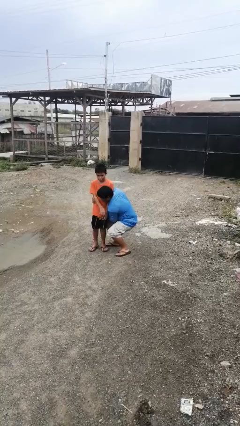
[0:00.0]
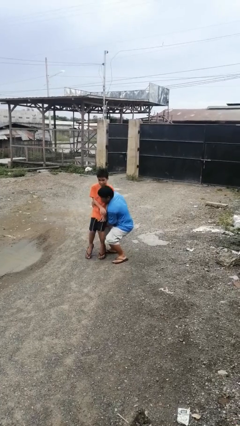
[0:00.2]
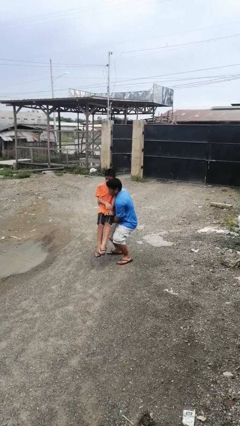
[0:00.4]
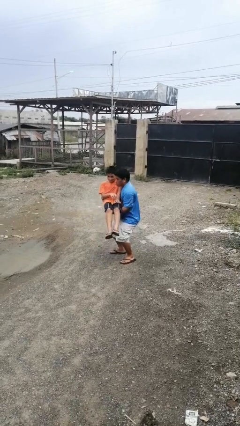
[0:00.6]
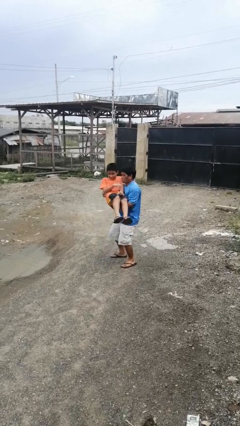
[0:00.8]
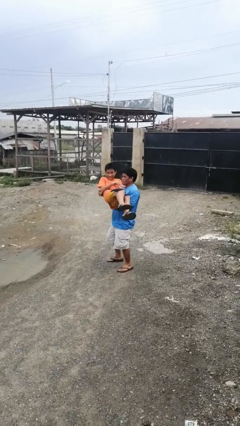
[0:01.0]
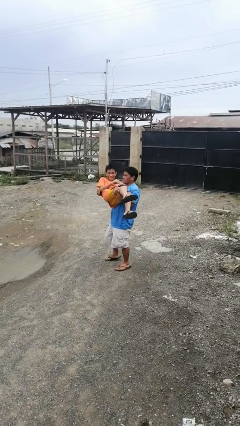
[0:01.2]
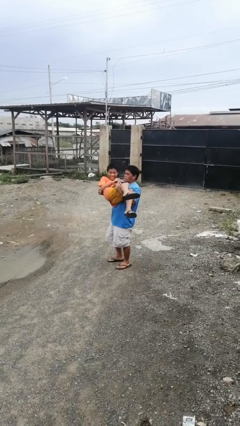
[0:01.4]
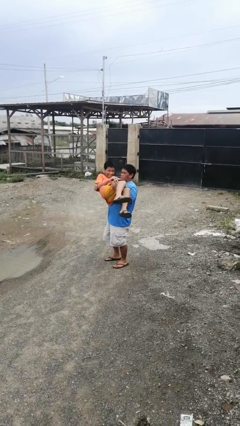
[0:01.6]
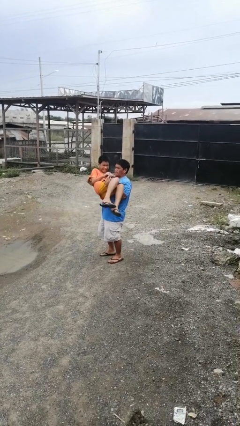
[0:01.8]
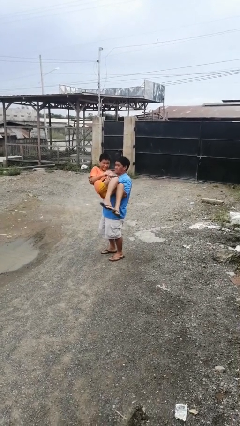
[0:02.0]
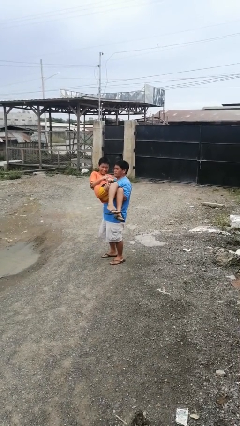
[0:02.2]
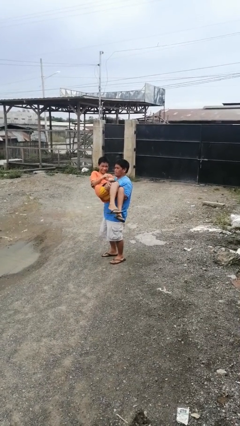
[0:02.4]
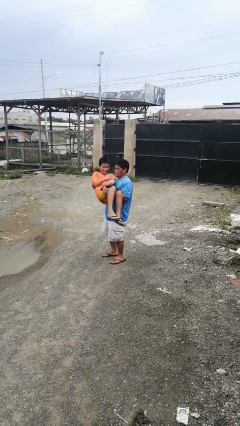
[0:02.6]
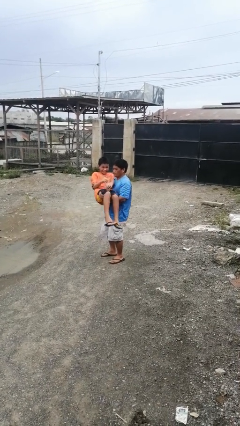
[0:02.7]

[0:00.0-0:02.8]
person picks up person

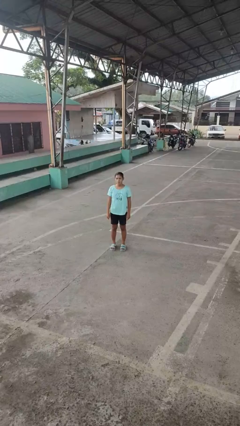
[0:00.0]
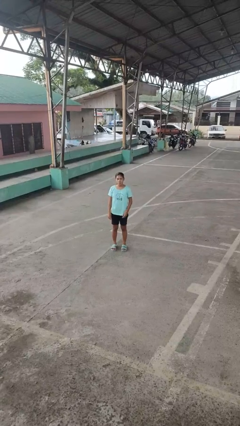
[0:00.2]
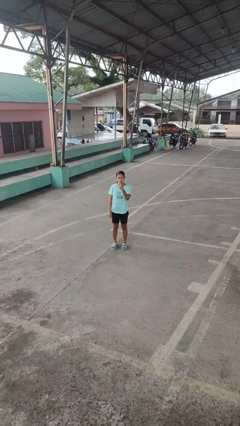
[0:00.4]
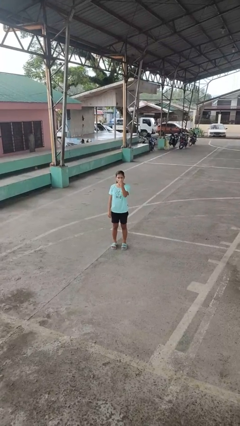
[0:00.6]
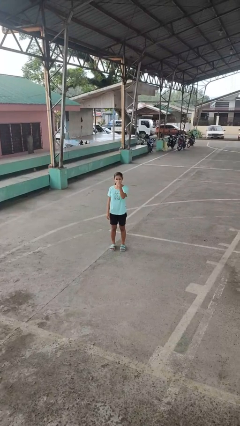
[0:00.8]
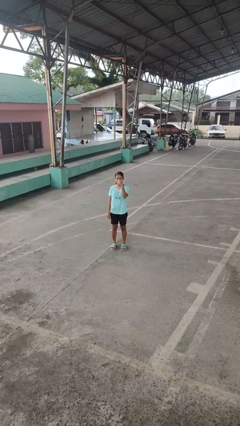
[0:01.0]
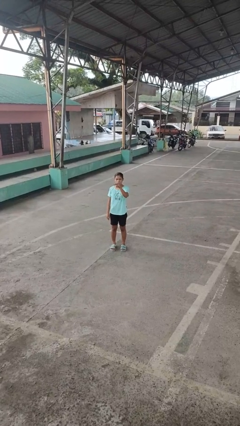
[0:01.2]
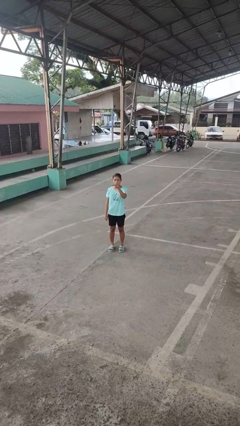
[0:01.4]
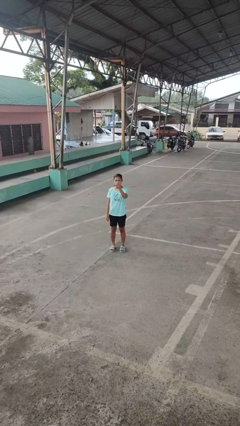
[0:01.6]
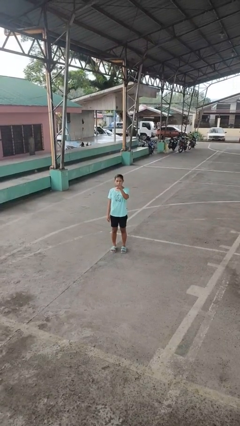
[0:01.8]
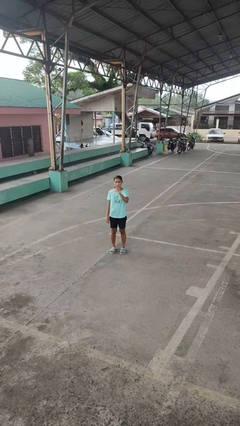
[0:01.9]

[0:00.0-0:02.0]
person gestures watch closely

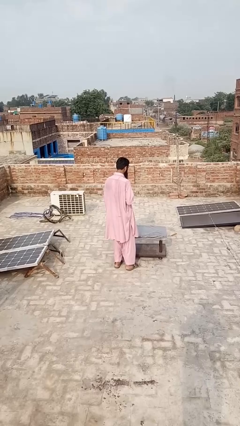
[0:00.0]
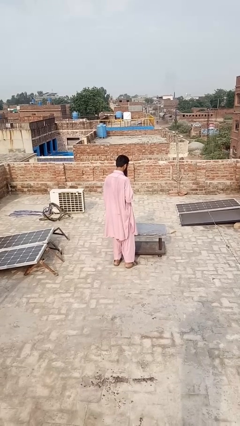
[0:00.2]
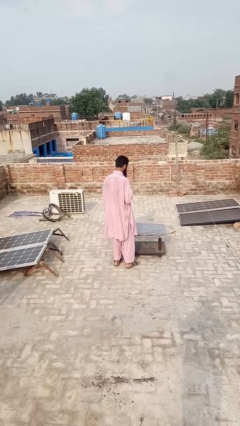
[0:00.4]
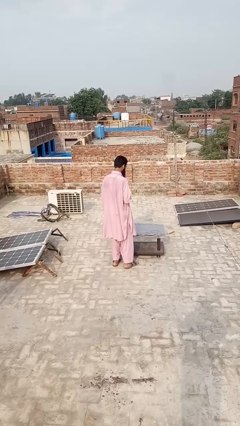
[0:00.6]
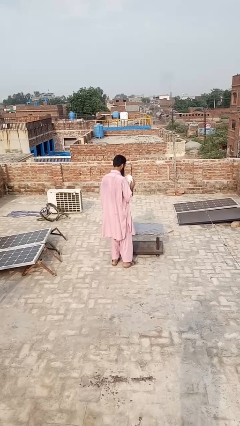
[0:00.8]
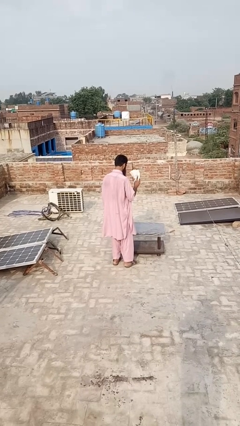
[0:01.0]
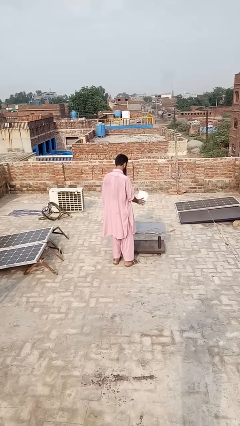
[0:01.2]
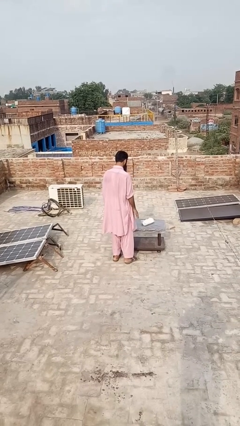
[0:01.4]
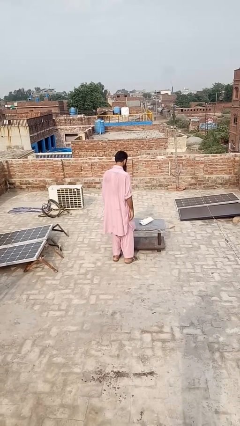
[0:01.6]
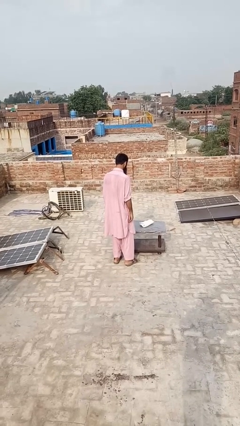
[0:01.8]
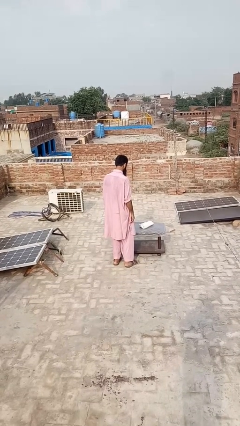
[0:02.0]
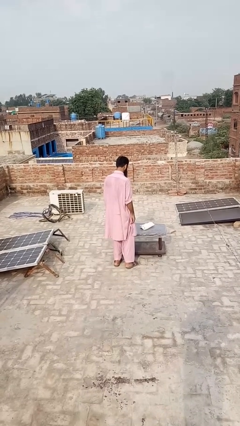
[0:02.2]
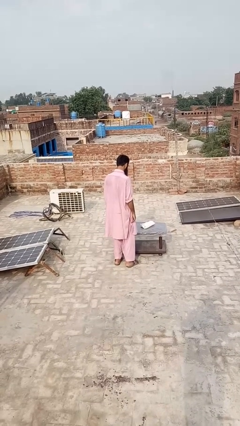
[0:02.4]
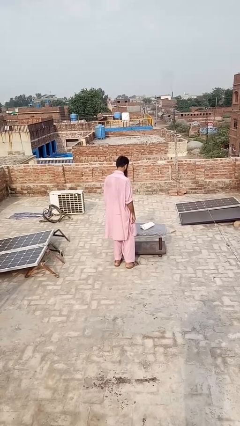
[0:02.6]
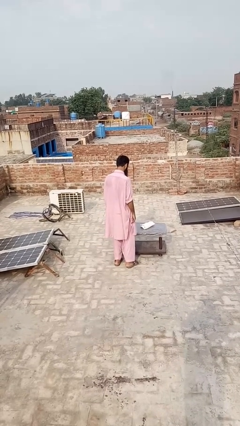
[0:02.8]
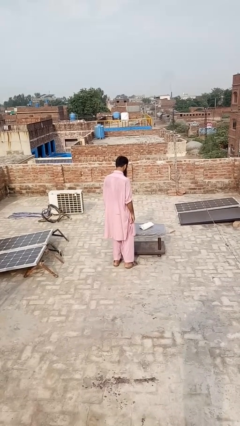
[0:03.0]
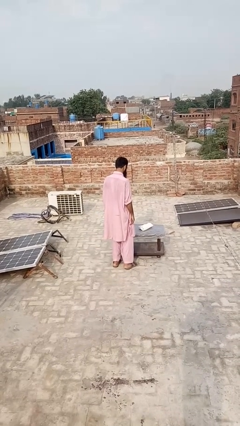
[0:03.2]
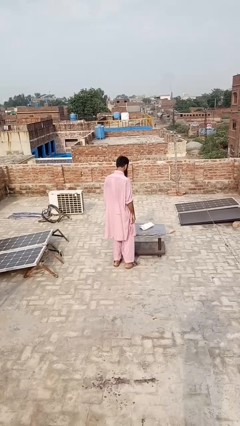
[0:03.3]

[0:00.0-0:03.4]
person throws object on table

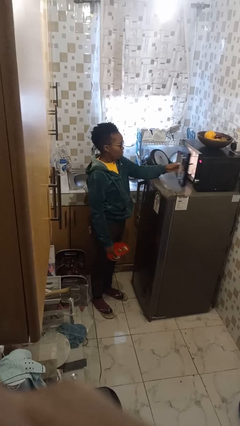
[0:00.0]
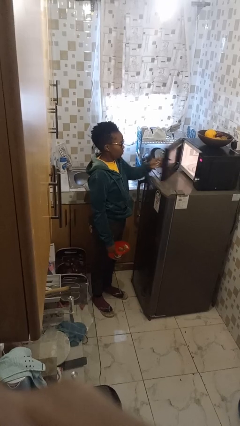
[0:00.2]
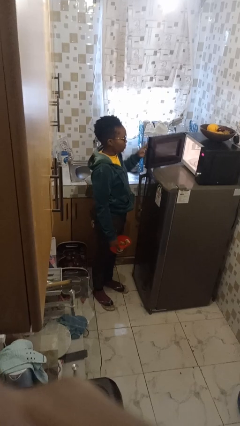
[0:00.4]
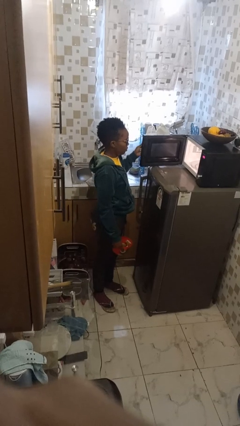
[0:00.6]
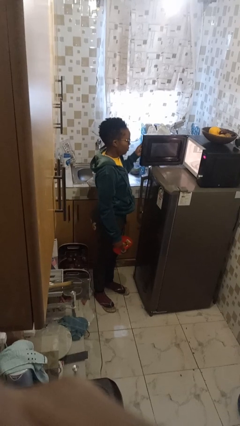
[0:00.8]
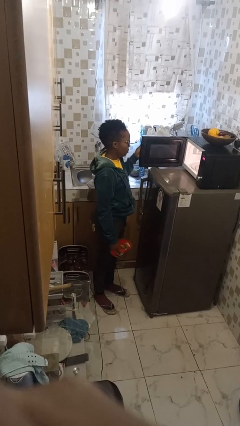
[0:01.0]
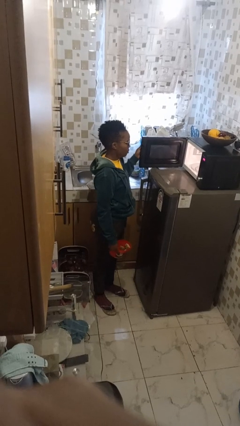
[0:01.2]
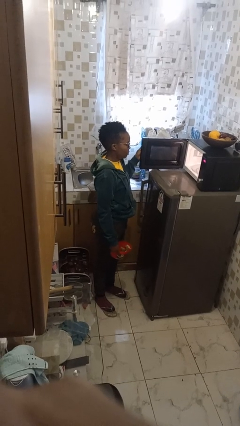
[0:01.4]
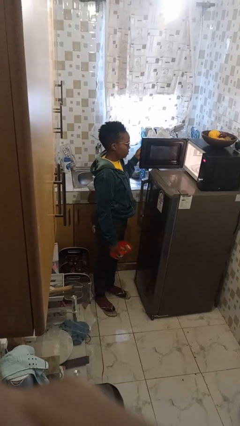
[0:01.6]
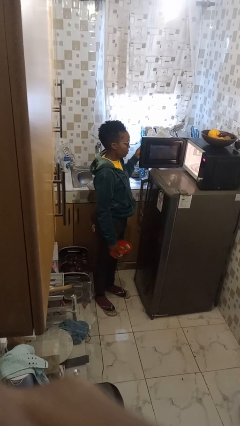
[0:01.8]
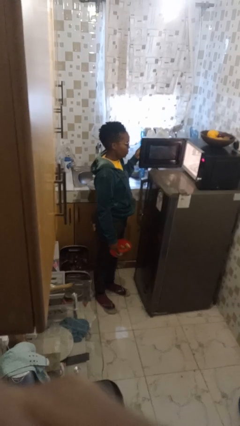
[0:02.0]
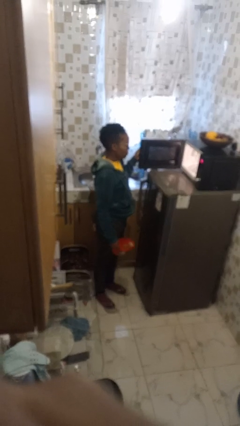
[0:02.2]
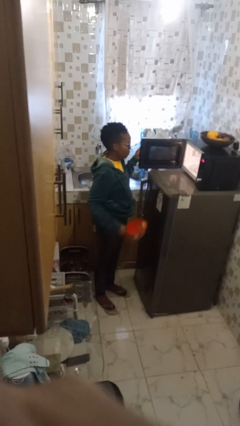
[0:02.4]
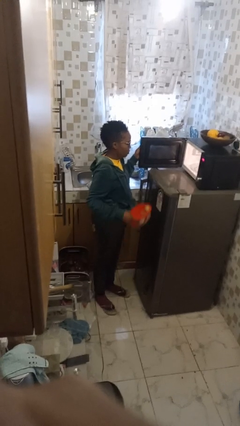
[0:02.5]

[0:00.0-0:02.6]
person opens microwave

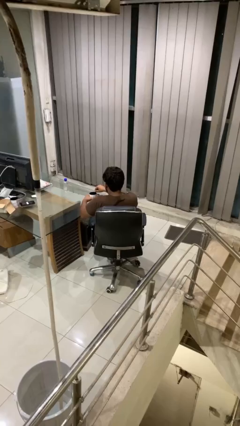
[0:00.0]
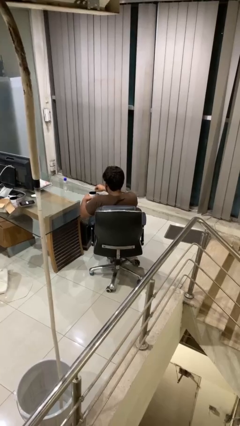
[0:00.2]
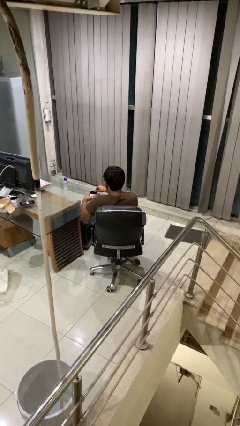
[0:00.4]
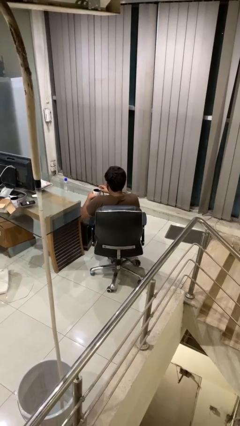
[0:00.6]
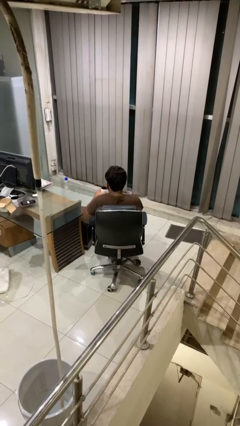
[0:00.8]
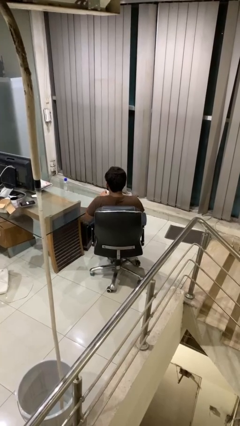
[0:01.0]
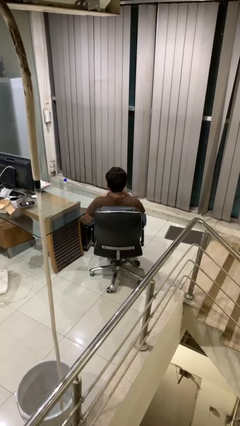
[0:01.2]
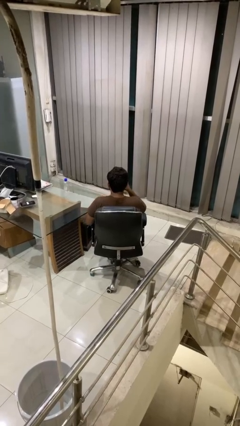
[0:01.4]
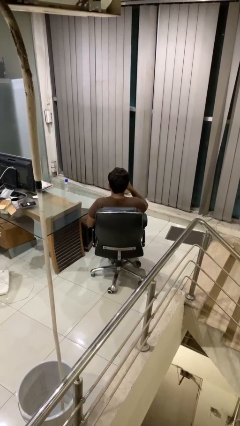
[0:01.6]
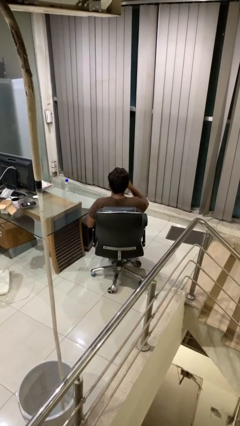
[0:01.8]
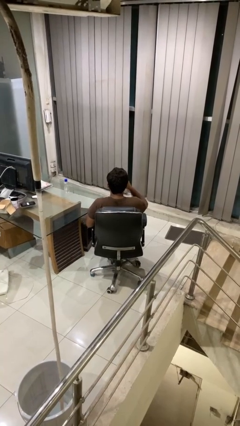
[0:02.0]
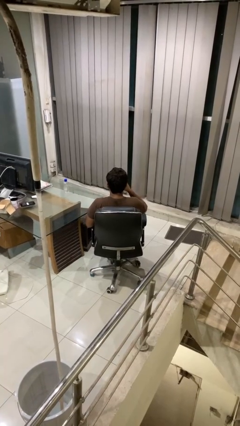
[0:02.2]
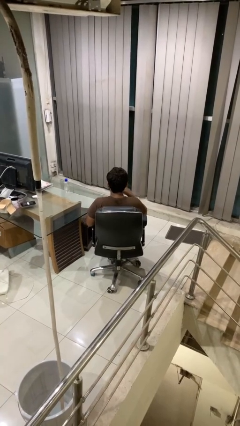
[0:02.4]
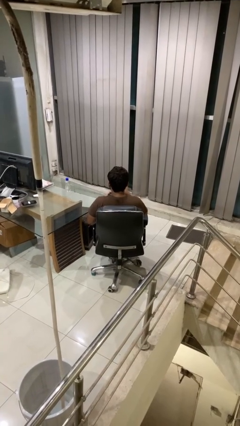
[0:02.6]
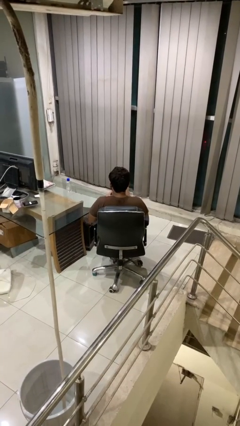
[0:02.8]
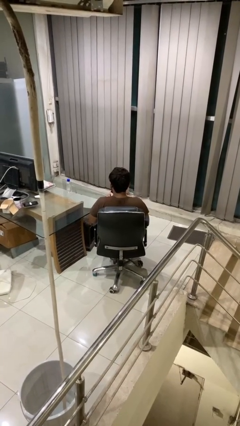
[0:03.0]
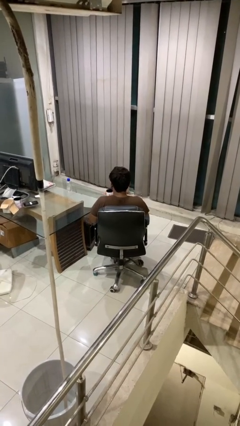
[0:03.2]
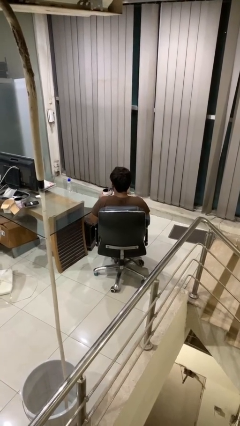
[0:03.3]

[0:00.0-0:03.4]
person drinks from mug

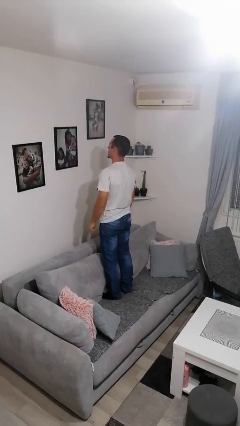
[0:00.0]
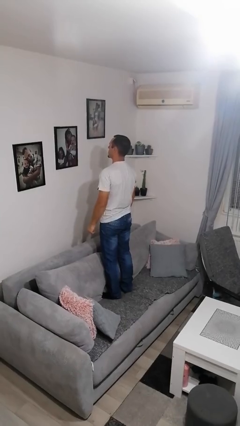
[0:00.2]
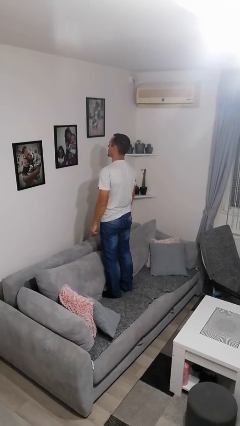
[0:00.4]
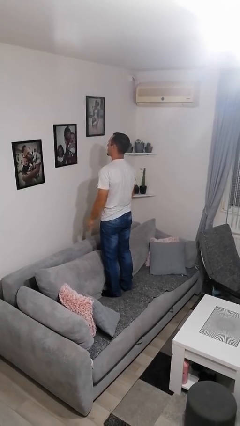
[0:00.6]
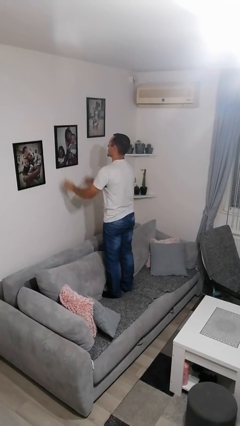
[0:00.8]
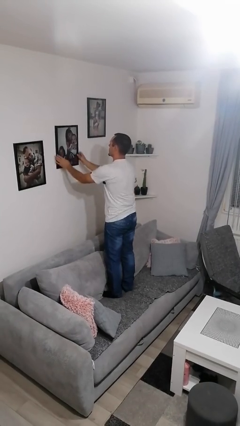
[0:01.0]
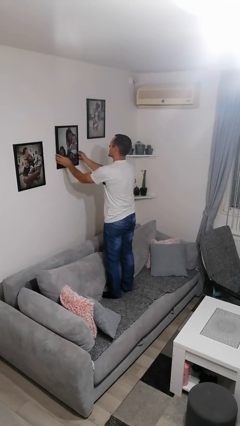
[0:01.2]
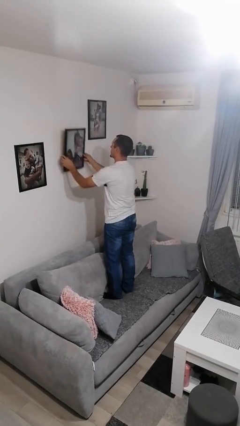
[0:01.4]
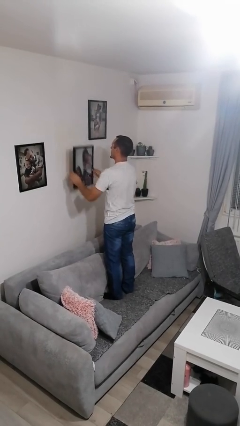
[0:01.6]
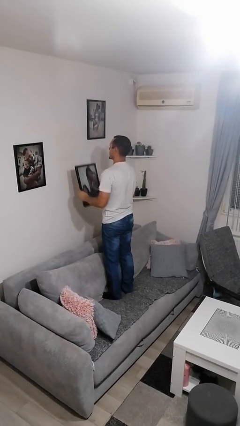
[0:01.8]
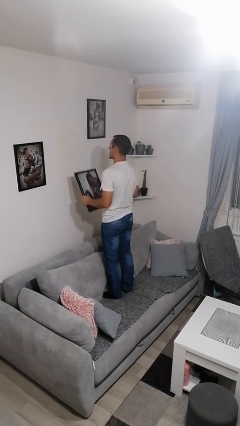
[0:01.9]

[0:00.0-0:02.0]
person takes down picture frame

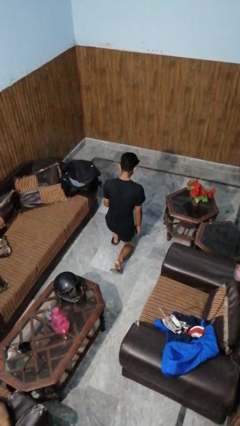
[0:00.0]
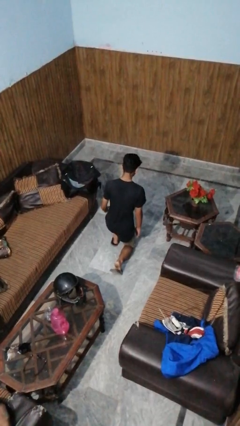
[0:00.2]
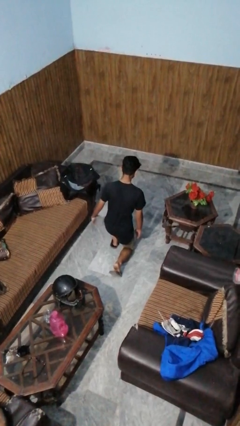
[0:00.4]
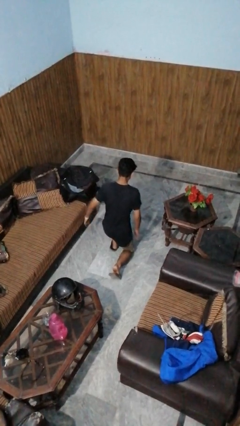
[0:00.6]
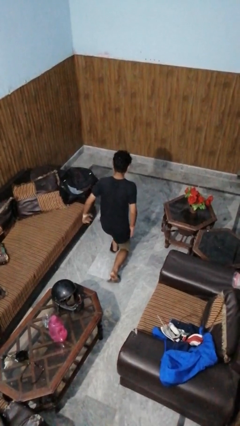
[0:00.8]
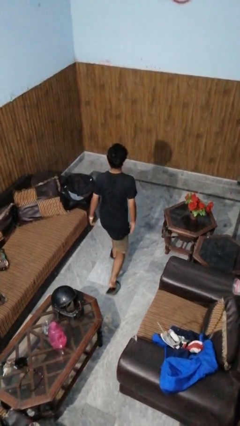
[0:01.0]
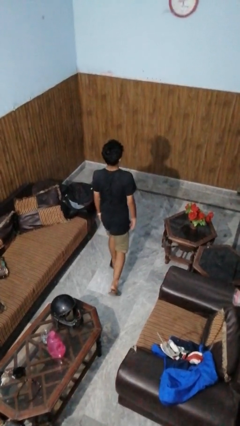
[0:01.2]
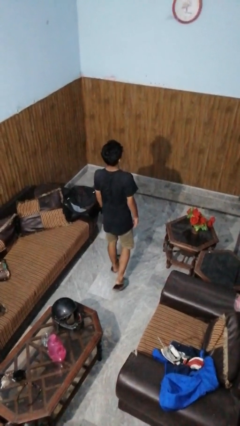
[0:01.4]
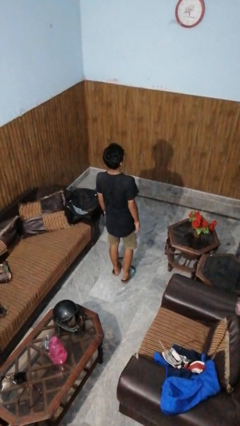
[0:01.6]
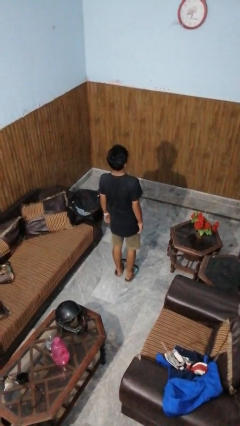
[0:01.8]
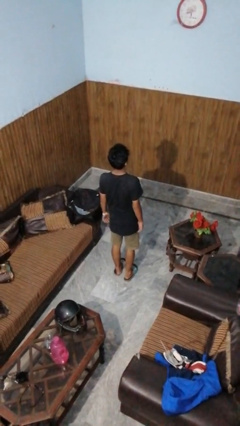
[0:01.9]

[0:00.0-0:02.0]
person stands up from floor
